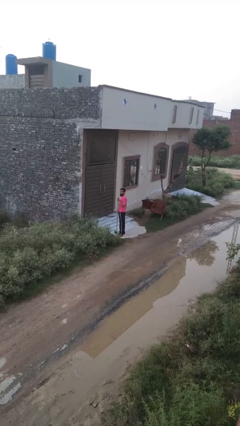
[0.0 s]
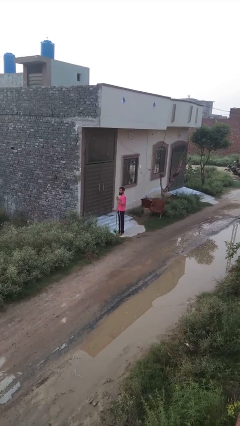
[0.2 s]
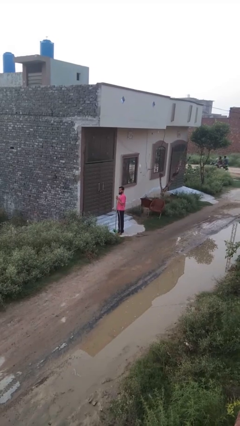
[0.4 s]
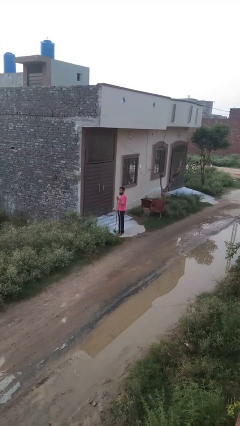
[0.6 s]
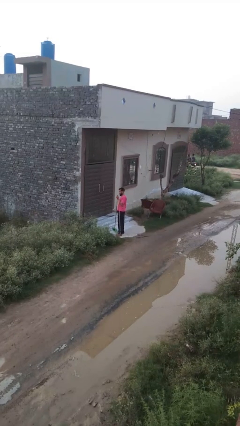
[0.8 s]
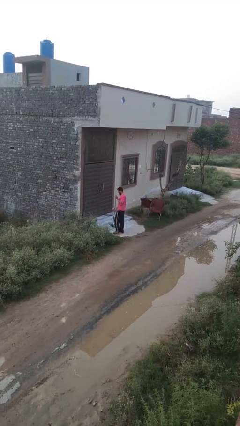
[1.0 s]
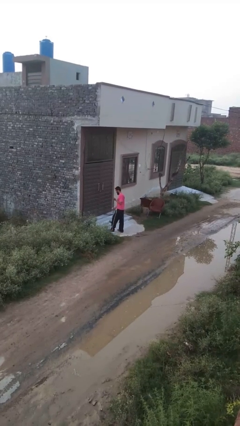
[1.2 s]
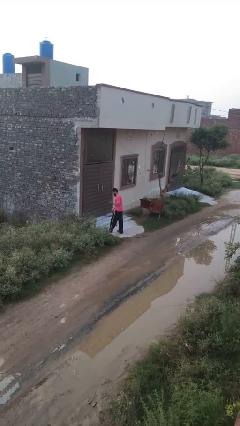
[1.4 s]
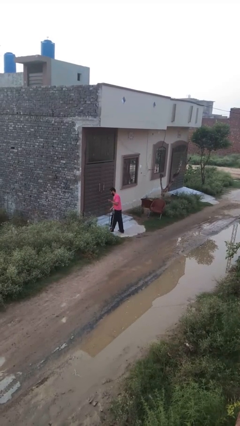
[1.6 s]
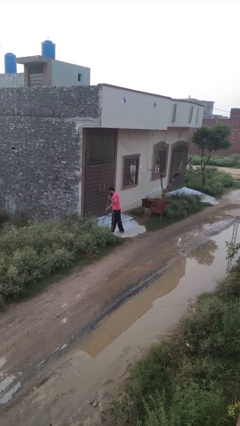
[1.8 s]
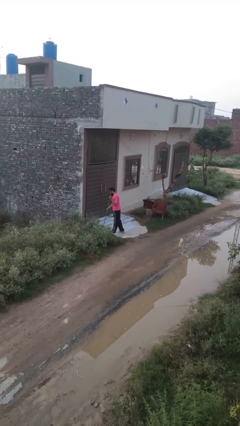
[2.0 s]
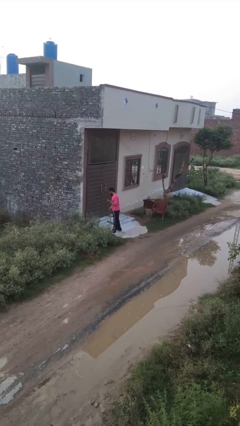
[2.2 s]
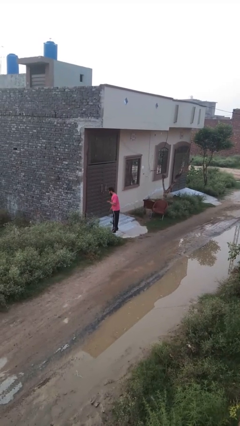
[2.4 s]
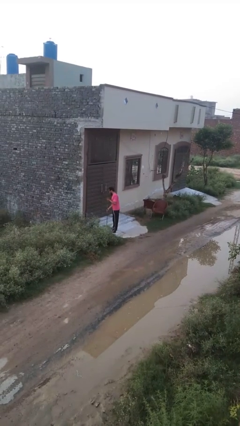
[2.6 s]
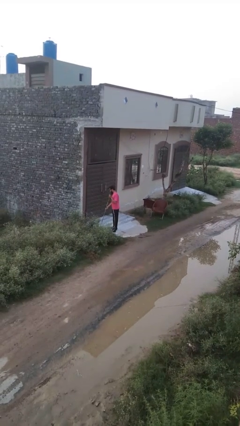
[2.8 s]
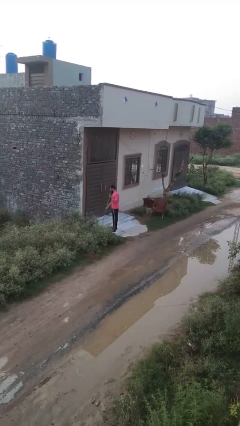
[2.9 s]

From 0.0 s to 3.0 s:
person sweeps floor

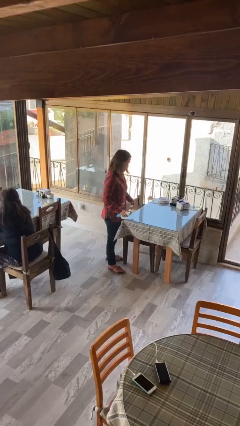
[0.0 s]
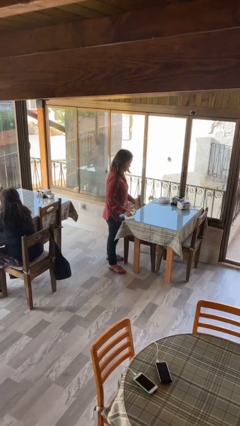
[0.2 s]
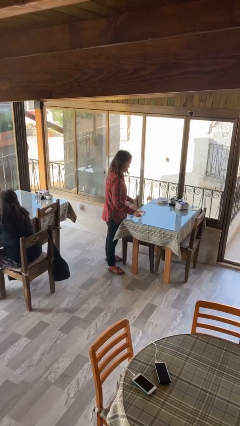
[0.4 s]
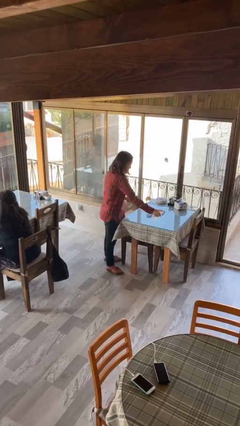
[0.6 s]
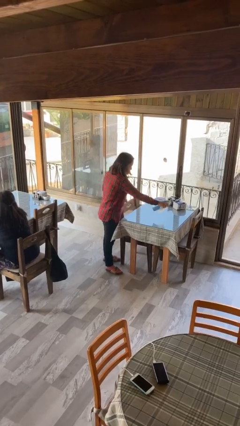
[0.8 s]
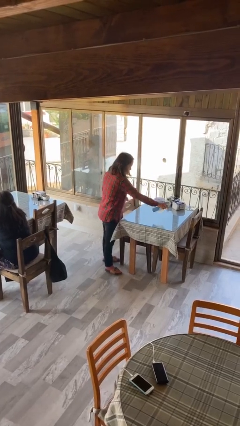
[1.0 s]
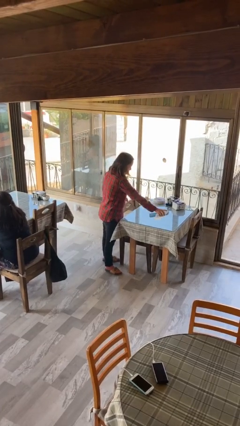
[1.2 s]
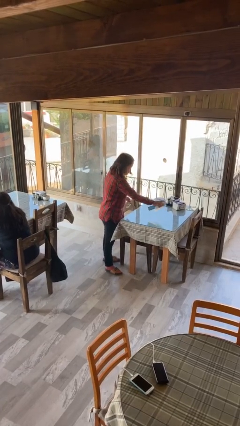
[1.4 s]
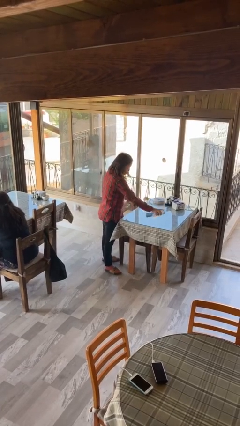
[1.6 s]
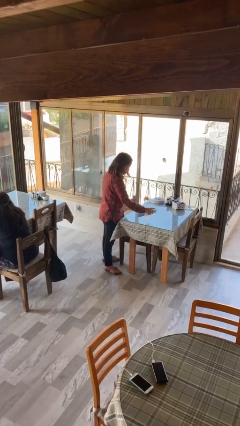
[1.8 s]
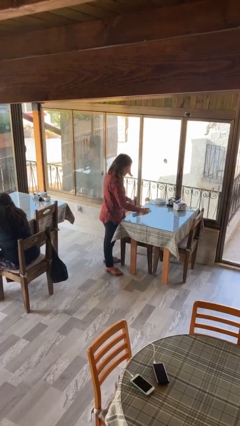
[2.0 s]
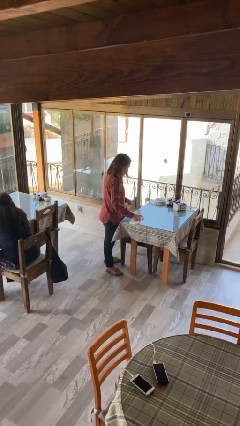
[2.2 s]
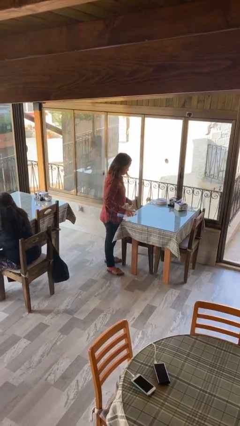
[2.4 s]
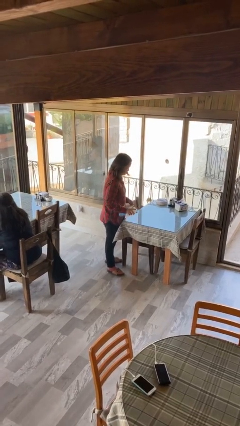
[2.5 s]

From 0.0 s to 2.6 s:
person sprays from bottle

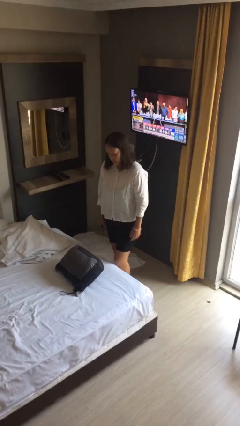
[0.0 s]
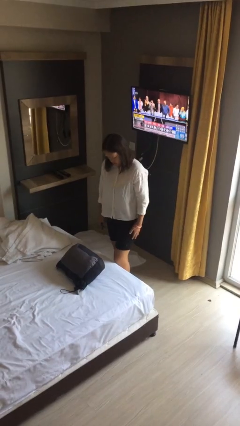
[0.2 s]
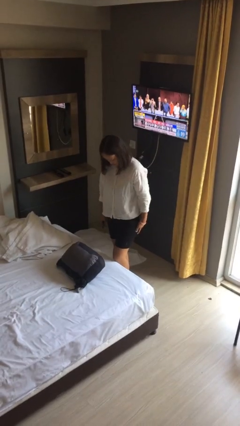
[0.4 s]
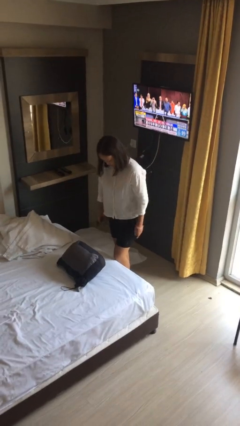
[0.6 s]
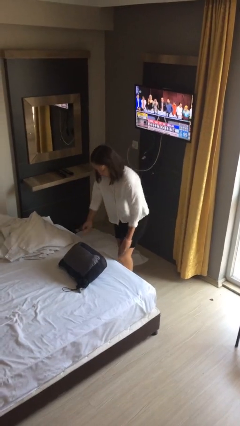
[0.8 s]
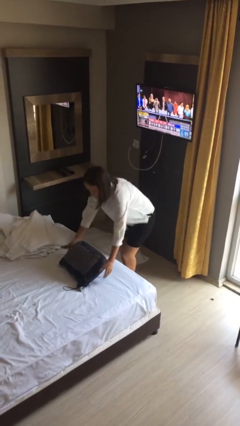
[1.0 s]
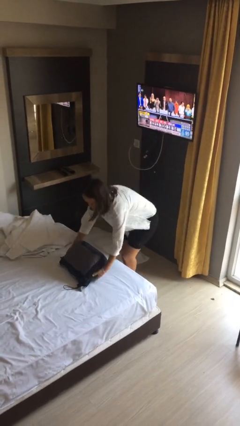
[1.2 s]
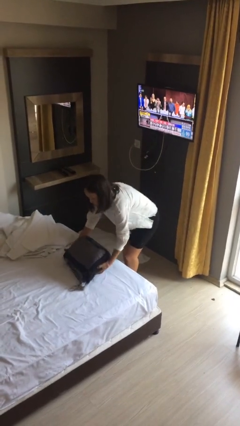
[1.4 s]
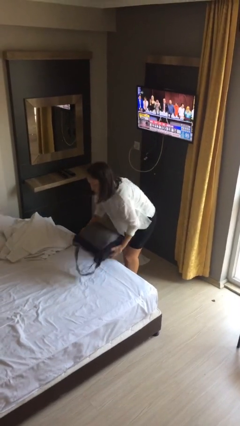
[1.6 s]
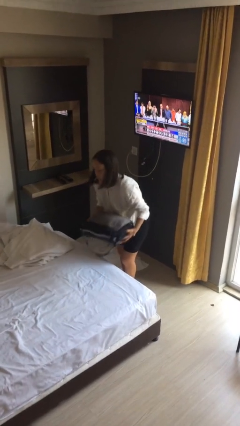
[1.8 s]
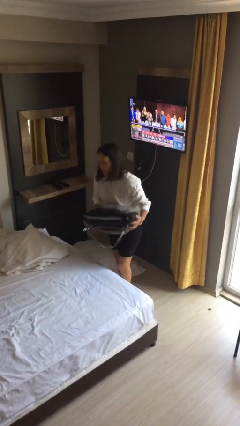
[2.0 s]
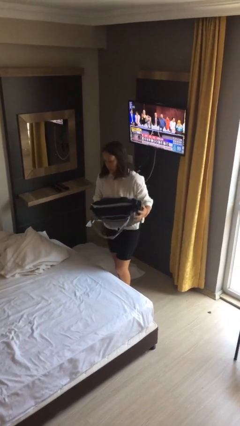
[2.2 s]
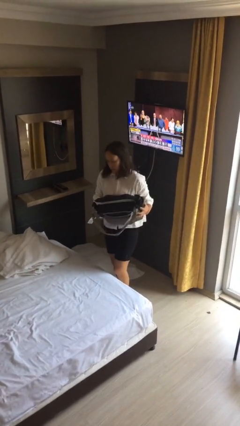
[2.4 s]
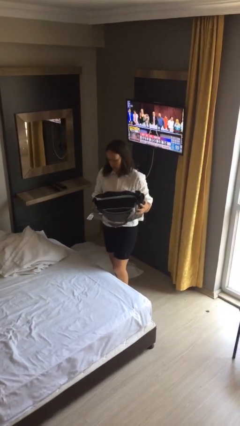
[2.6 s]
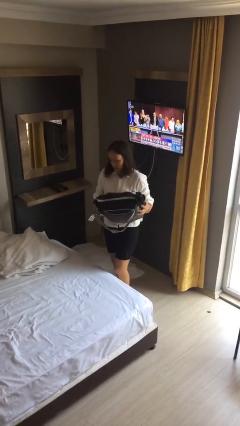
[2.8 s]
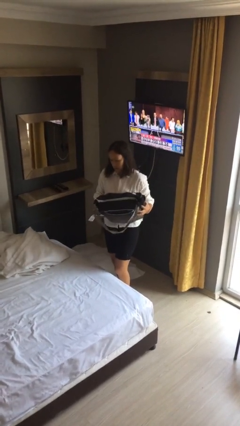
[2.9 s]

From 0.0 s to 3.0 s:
person picks up object from bed

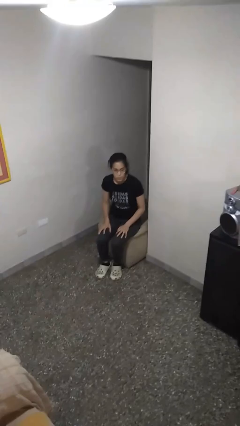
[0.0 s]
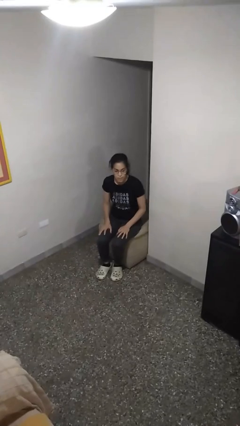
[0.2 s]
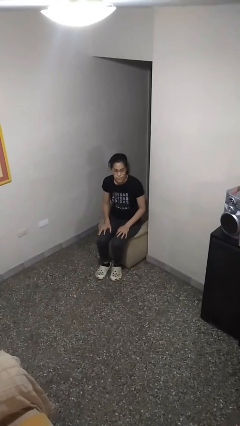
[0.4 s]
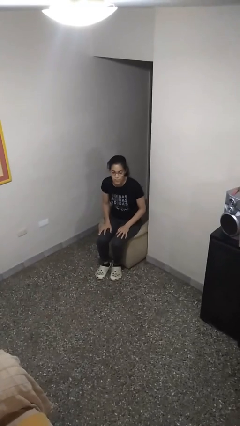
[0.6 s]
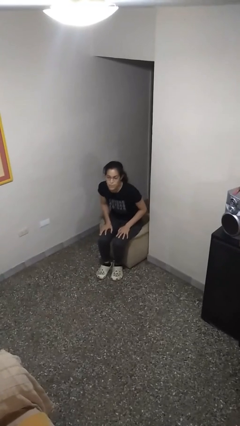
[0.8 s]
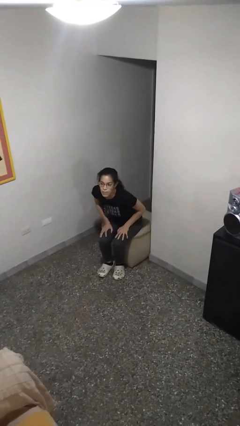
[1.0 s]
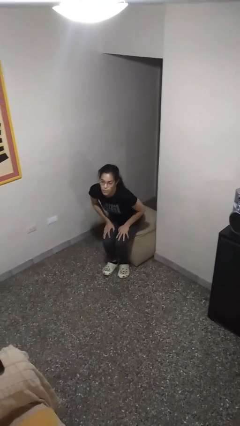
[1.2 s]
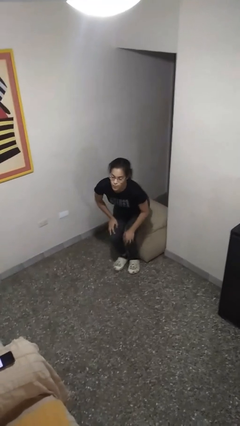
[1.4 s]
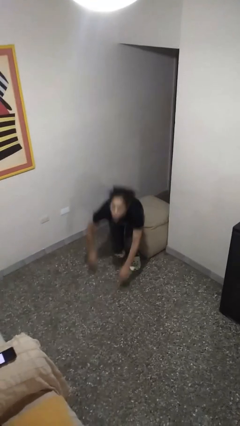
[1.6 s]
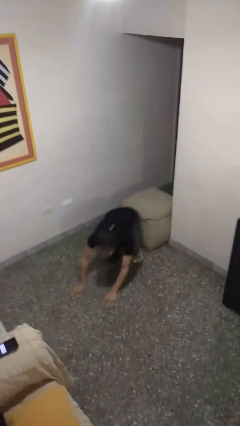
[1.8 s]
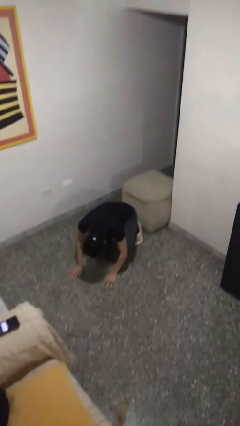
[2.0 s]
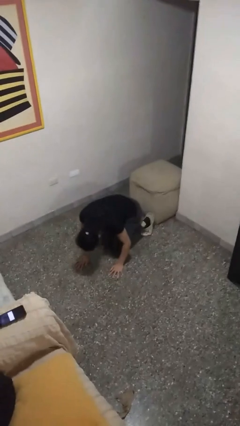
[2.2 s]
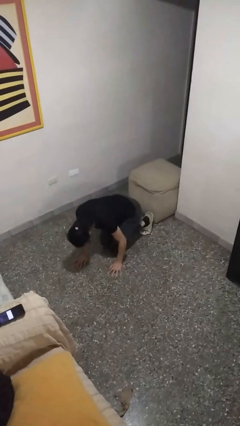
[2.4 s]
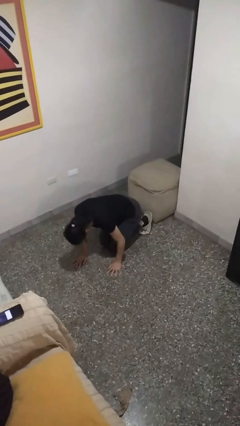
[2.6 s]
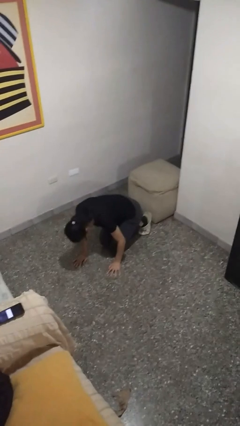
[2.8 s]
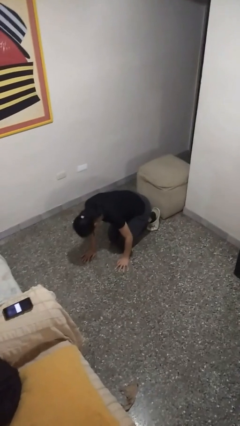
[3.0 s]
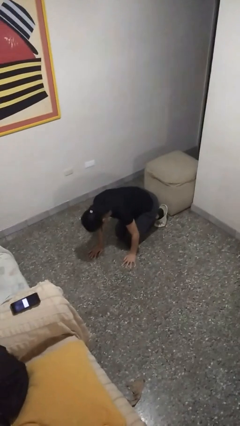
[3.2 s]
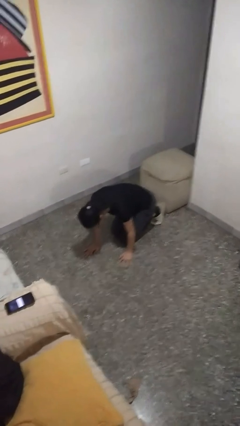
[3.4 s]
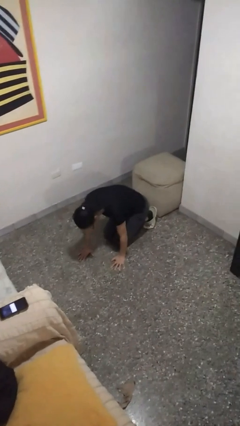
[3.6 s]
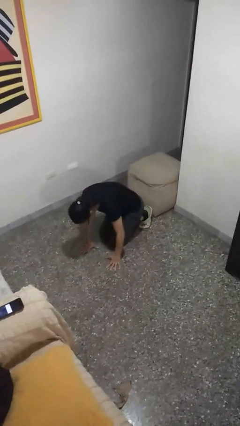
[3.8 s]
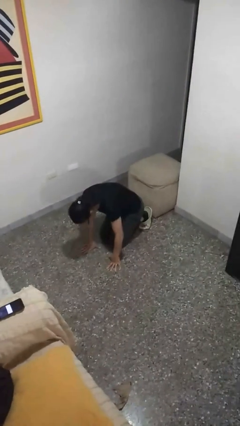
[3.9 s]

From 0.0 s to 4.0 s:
person falls from chair

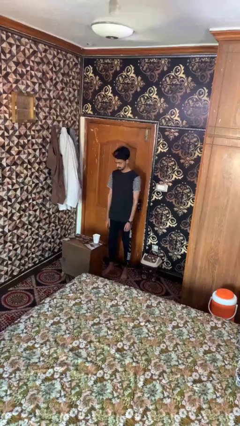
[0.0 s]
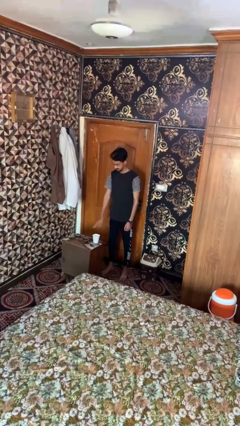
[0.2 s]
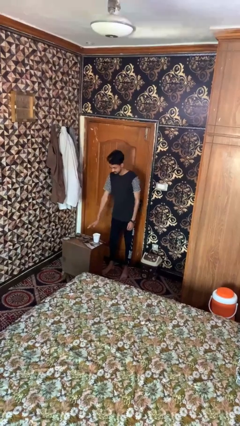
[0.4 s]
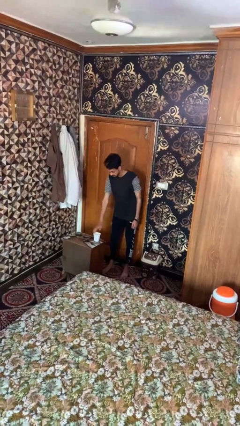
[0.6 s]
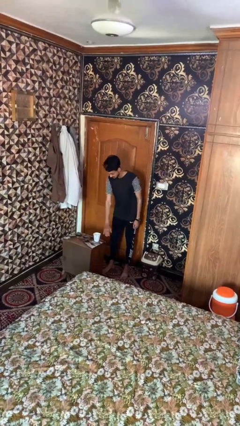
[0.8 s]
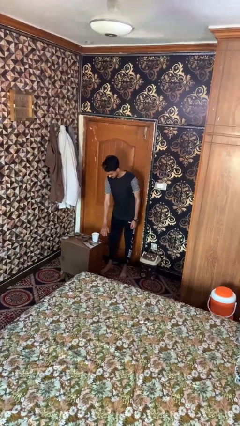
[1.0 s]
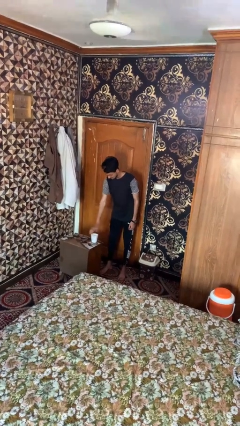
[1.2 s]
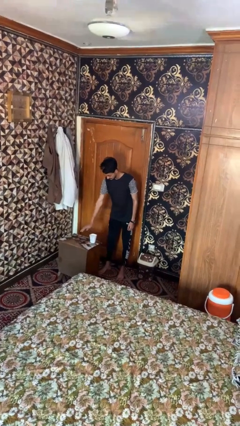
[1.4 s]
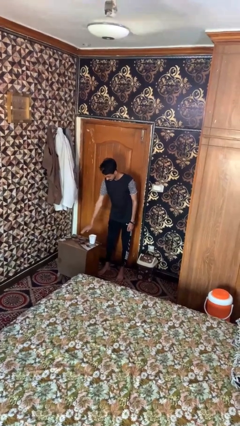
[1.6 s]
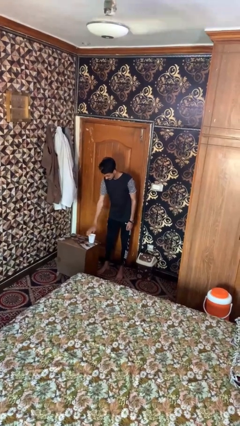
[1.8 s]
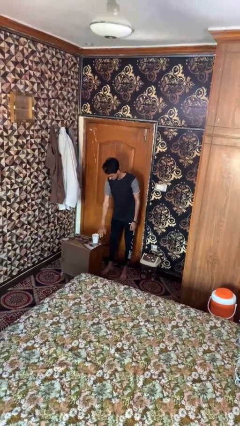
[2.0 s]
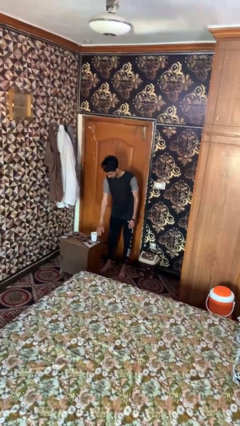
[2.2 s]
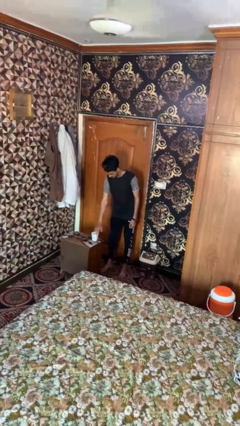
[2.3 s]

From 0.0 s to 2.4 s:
person waves hand over object

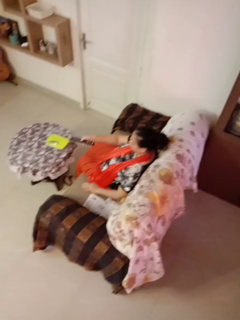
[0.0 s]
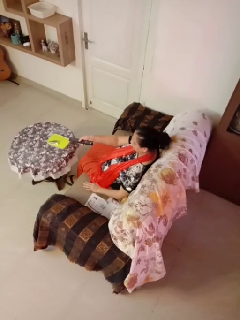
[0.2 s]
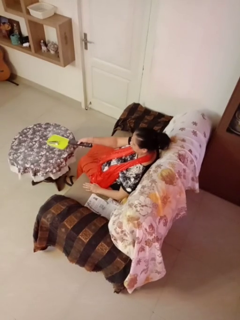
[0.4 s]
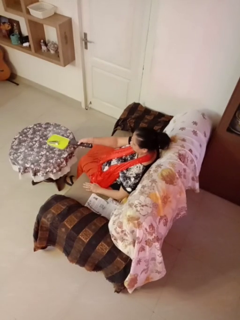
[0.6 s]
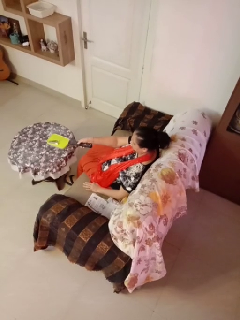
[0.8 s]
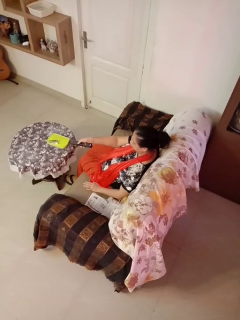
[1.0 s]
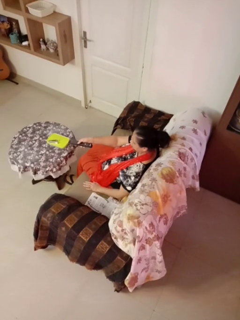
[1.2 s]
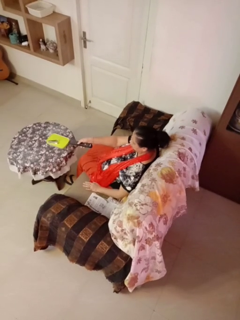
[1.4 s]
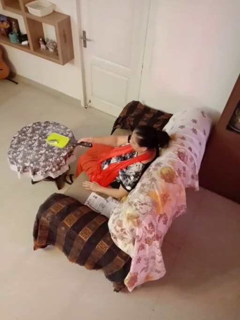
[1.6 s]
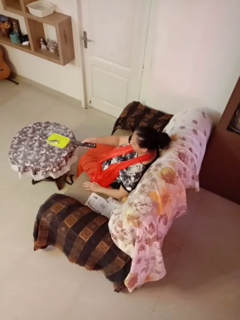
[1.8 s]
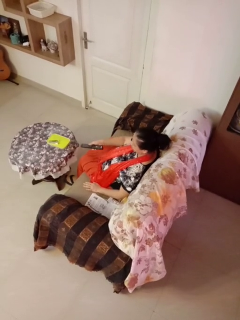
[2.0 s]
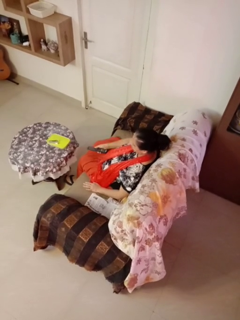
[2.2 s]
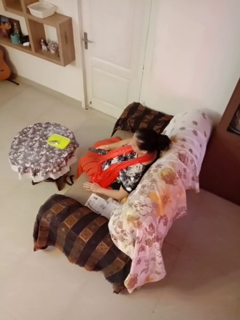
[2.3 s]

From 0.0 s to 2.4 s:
person uses television remote

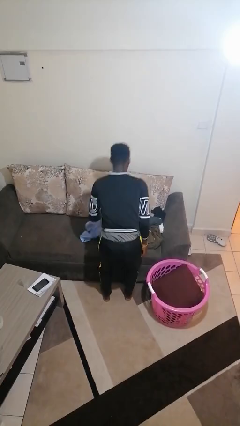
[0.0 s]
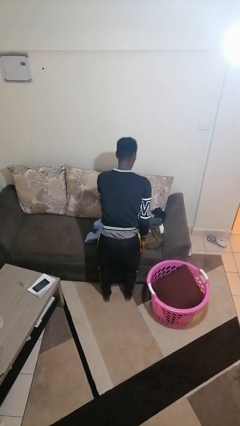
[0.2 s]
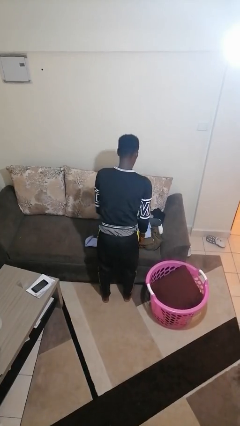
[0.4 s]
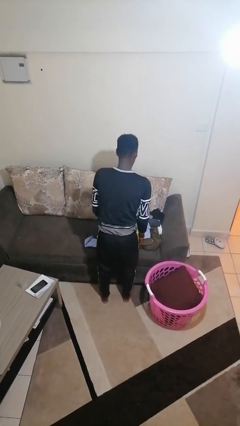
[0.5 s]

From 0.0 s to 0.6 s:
person folds shirt
